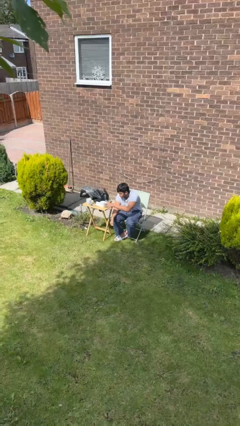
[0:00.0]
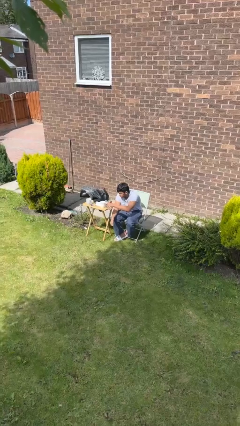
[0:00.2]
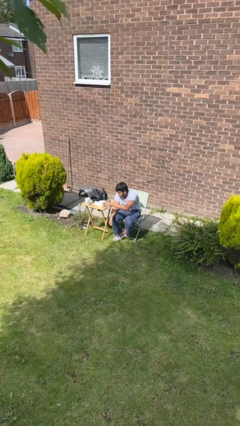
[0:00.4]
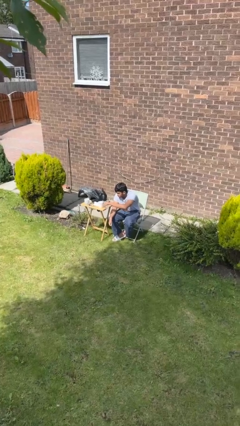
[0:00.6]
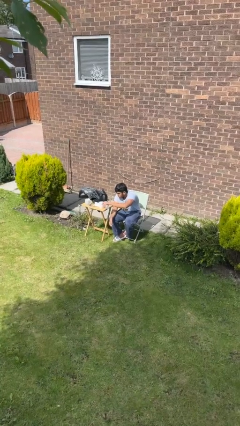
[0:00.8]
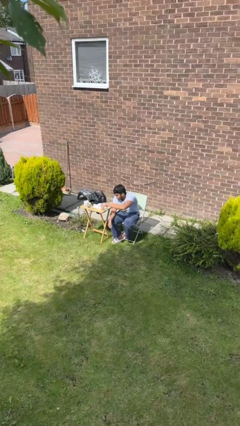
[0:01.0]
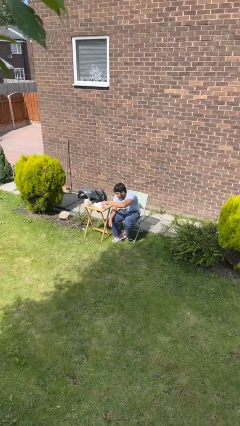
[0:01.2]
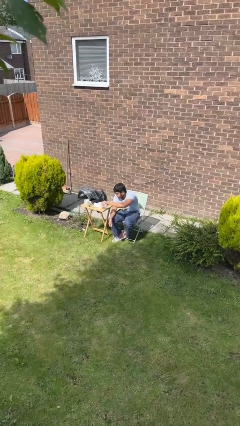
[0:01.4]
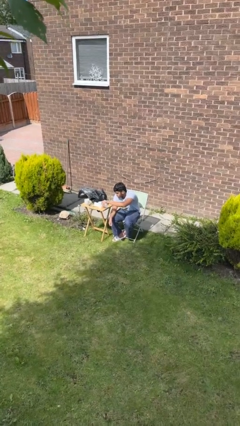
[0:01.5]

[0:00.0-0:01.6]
person pours liquid into cup

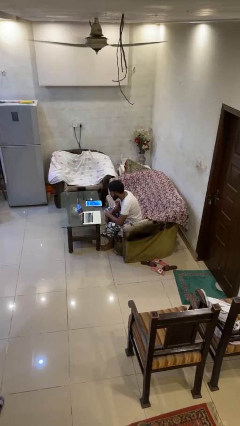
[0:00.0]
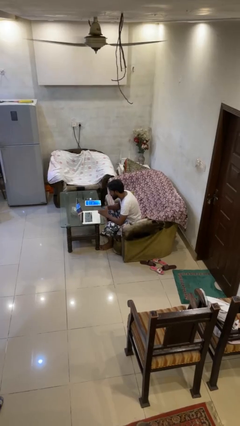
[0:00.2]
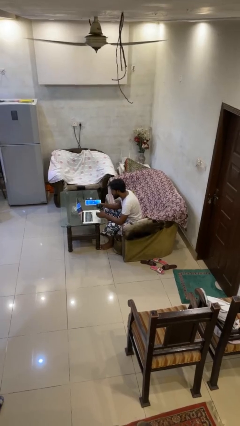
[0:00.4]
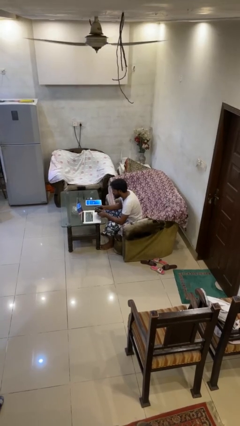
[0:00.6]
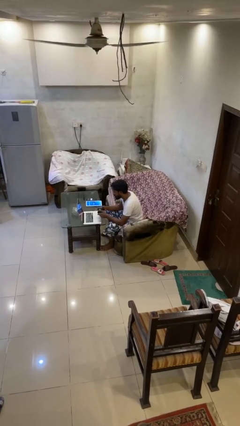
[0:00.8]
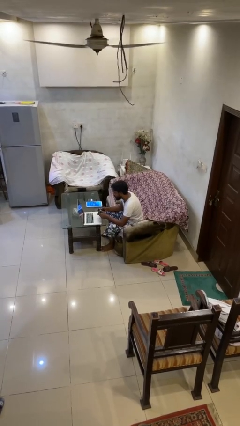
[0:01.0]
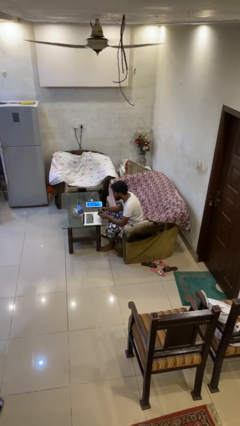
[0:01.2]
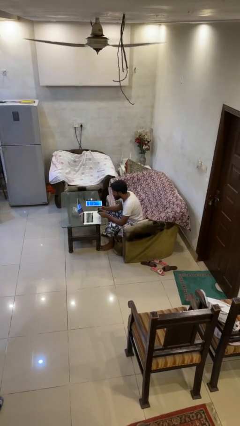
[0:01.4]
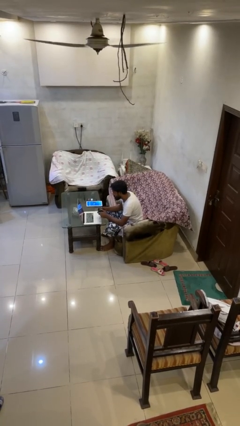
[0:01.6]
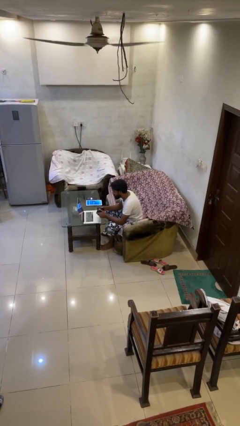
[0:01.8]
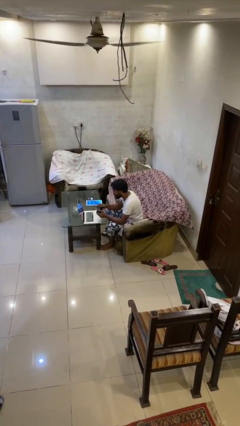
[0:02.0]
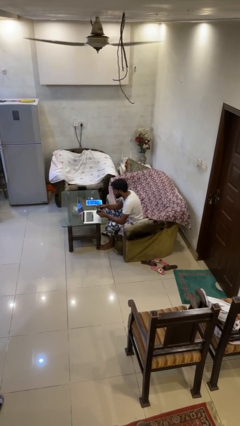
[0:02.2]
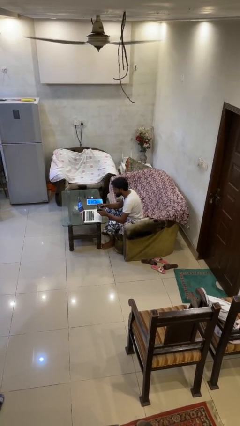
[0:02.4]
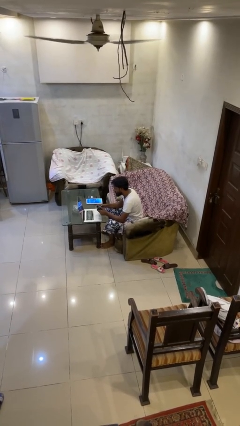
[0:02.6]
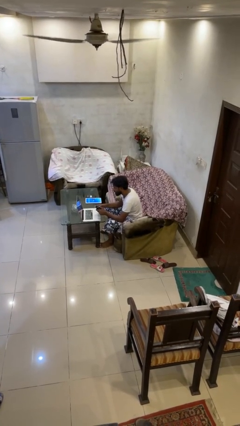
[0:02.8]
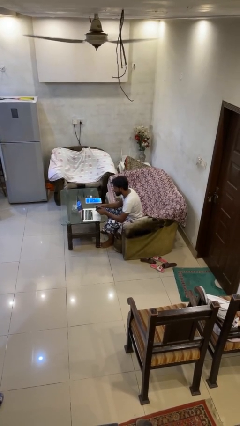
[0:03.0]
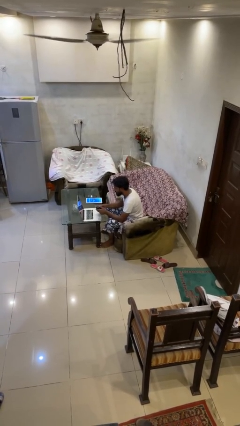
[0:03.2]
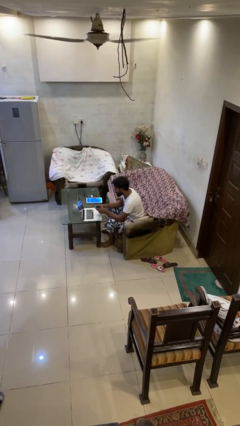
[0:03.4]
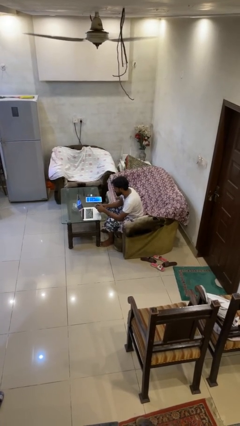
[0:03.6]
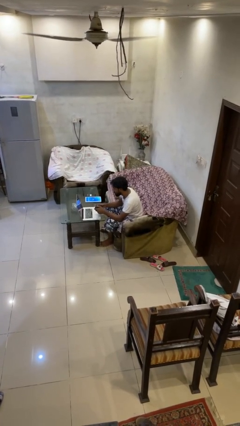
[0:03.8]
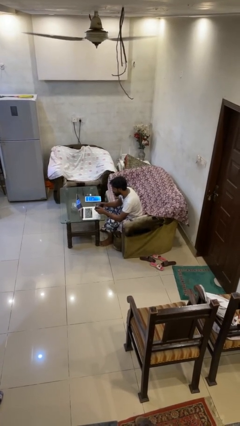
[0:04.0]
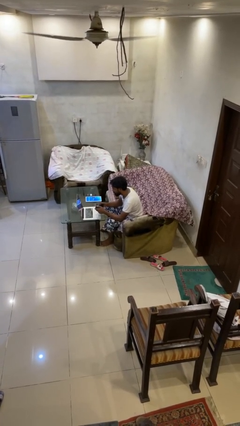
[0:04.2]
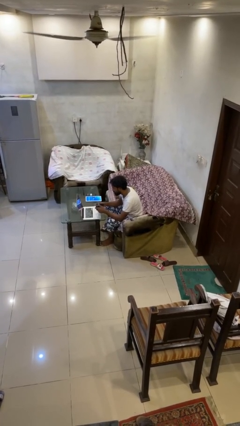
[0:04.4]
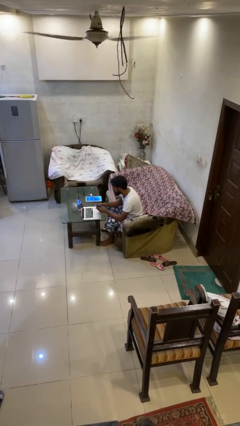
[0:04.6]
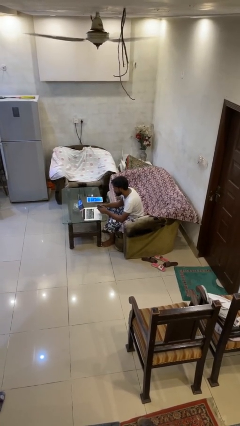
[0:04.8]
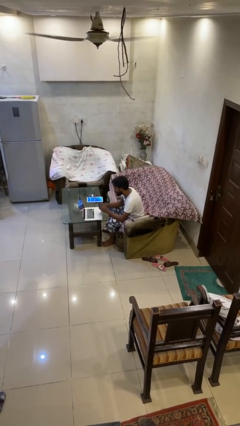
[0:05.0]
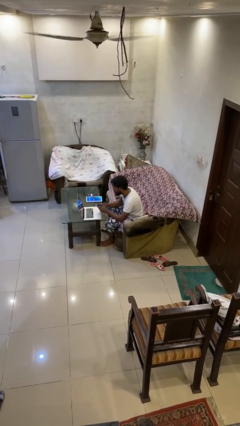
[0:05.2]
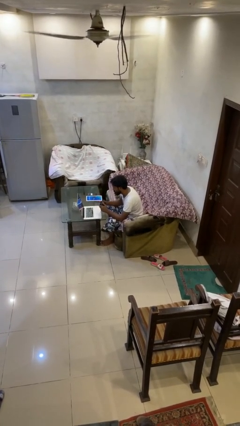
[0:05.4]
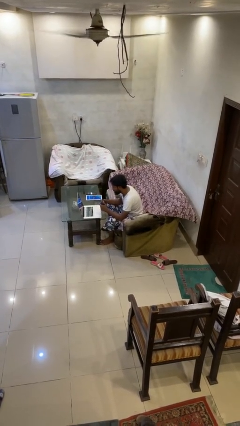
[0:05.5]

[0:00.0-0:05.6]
person interacts with handheld game

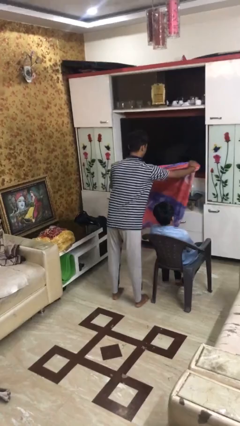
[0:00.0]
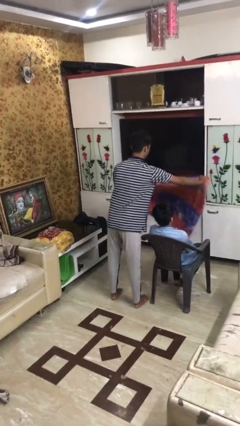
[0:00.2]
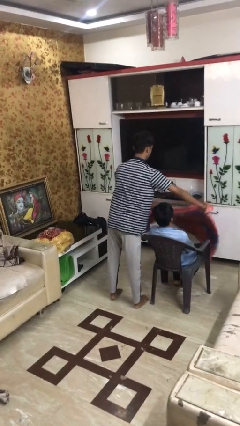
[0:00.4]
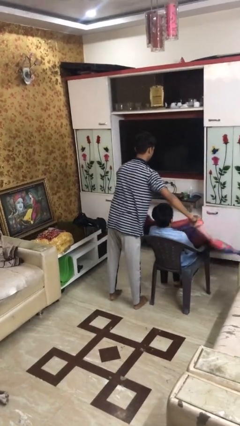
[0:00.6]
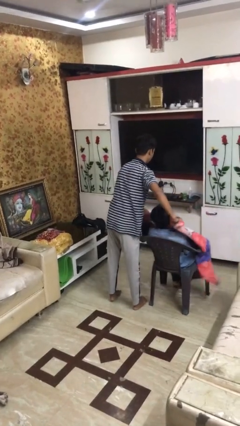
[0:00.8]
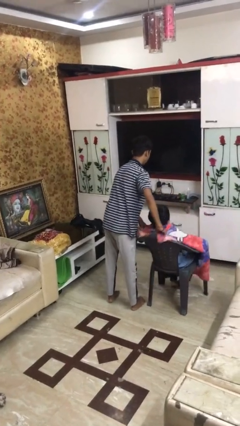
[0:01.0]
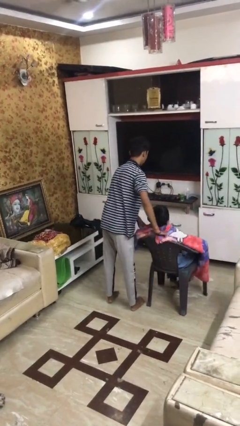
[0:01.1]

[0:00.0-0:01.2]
person covers friend with blanket

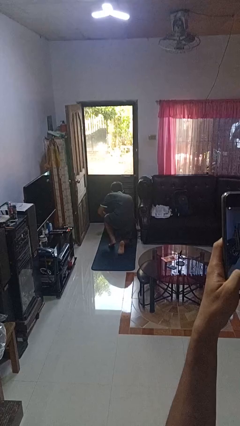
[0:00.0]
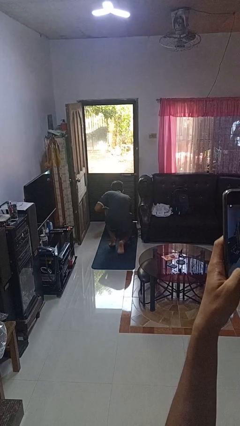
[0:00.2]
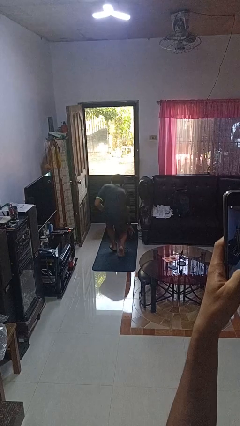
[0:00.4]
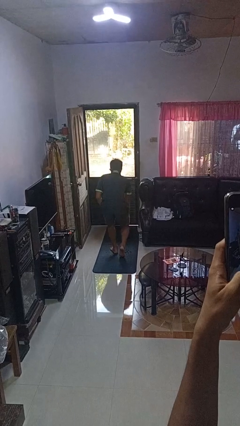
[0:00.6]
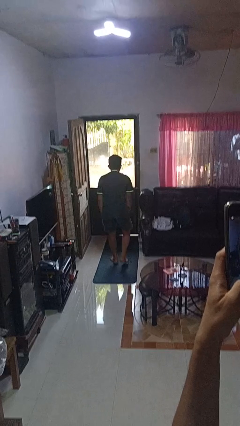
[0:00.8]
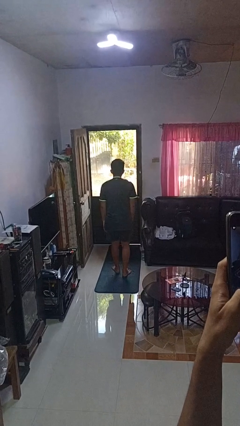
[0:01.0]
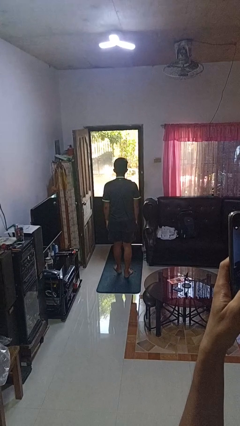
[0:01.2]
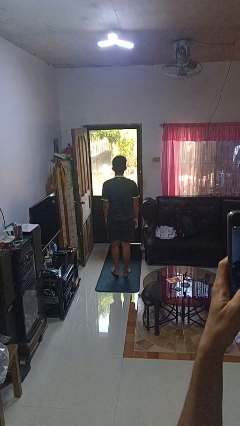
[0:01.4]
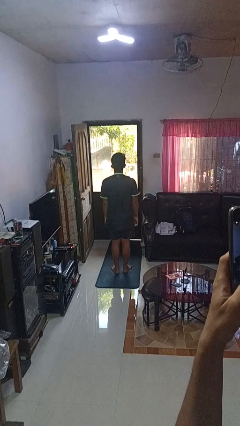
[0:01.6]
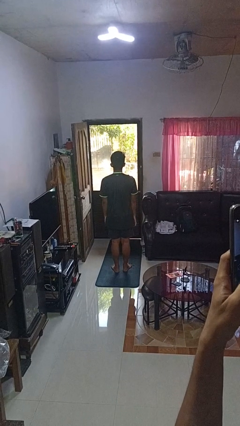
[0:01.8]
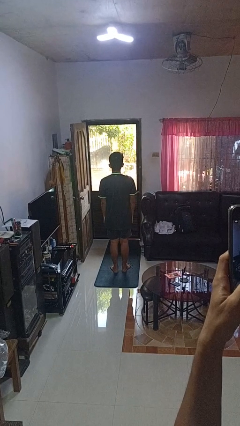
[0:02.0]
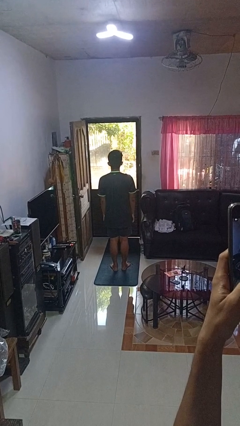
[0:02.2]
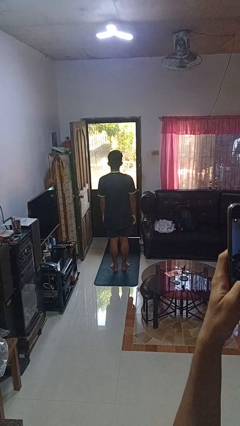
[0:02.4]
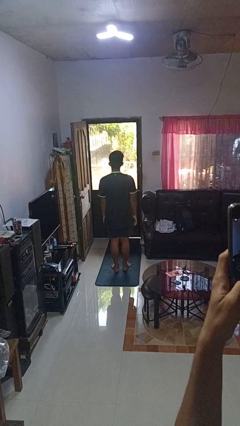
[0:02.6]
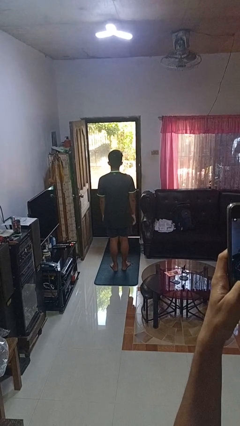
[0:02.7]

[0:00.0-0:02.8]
person stands up from floor

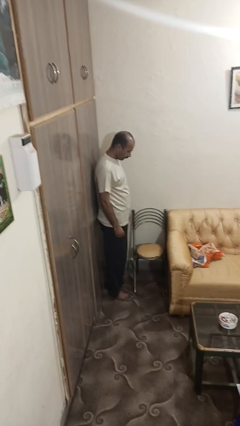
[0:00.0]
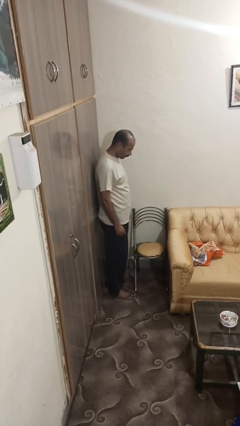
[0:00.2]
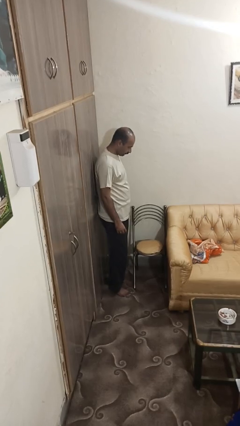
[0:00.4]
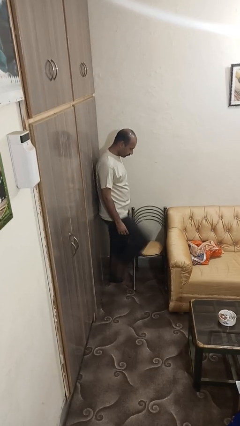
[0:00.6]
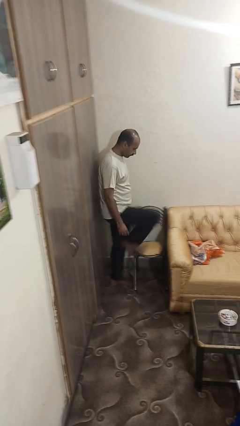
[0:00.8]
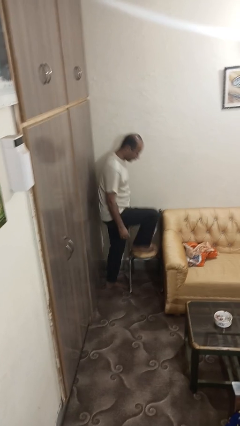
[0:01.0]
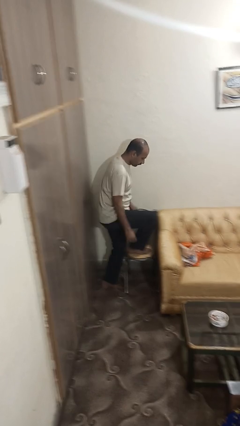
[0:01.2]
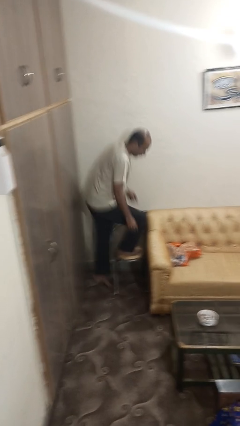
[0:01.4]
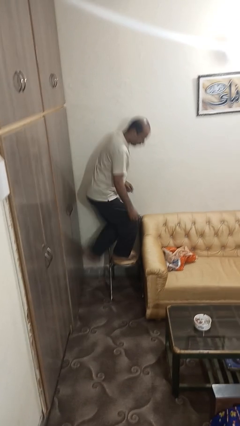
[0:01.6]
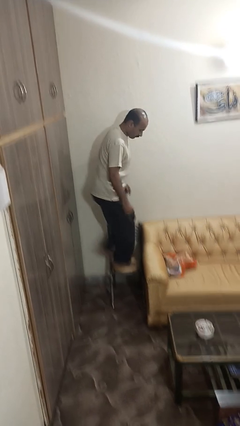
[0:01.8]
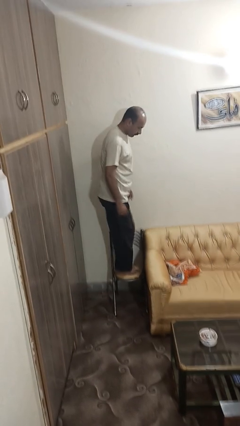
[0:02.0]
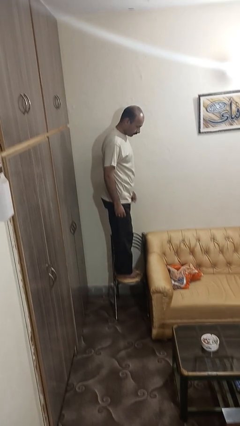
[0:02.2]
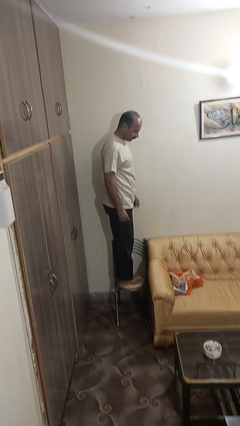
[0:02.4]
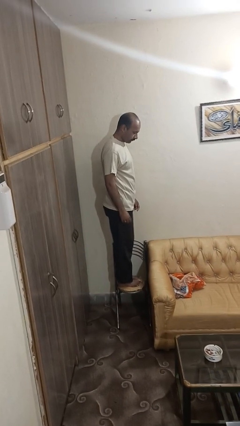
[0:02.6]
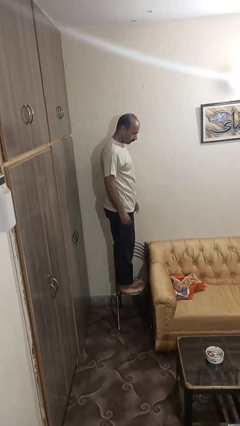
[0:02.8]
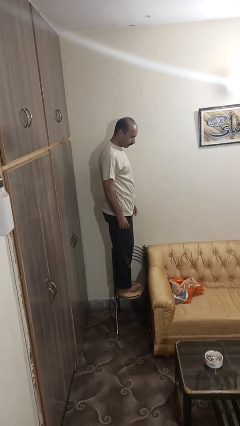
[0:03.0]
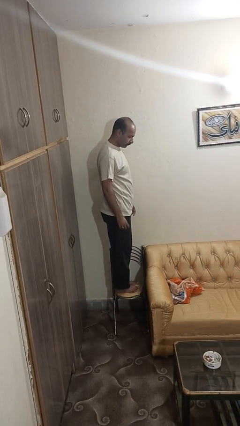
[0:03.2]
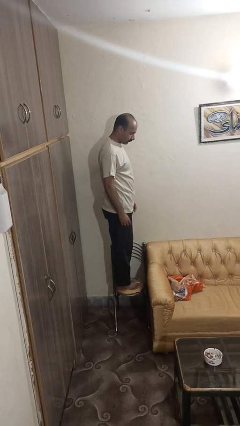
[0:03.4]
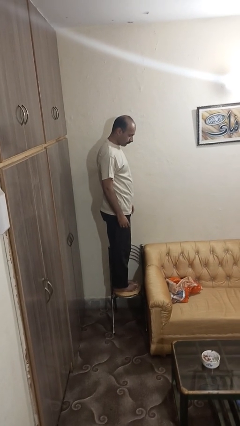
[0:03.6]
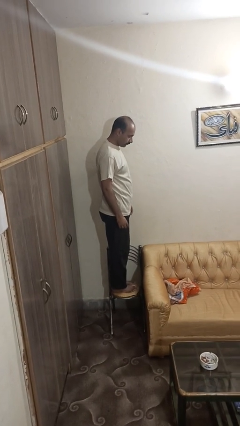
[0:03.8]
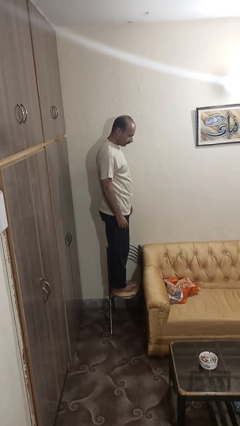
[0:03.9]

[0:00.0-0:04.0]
person climbs on chair

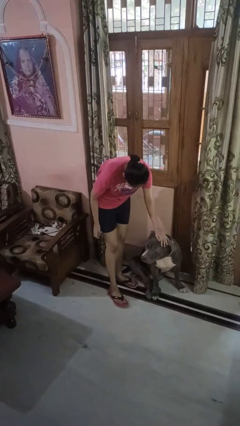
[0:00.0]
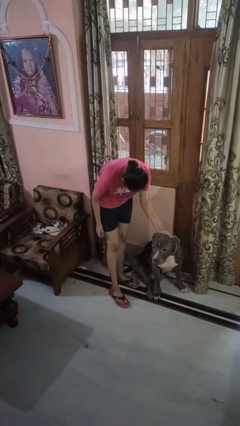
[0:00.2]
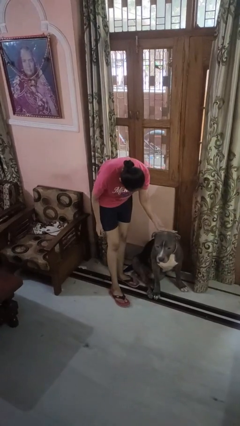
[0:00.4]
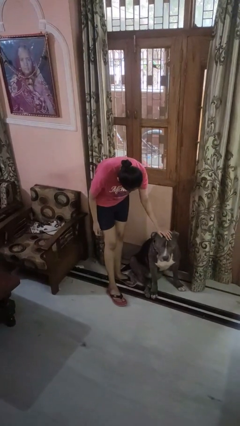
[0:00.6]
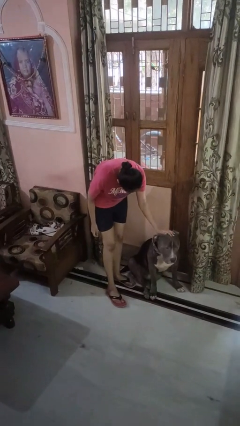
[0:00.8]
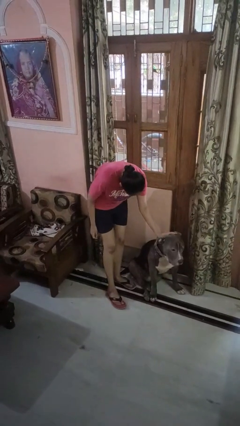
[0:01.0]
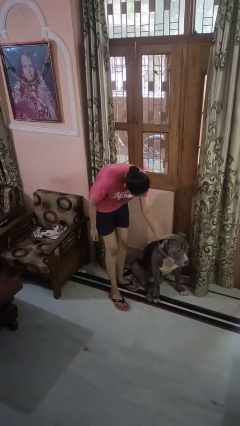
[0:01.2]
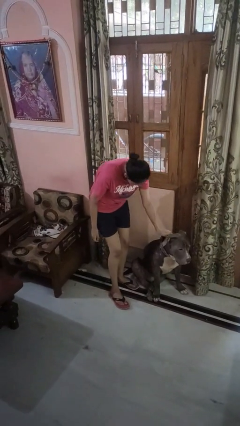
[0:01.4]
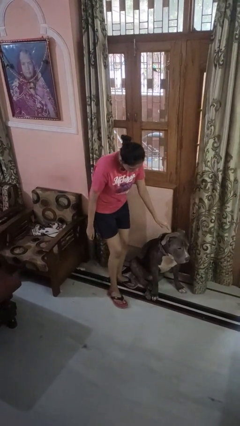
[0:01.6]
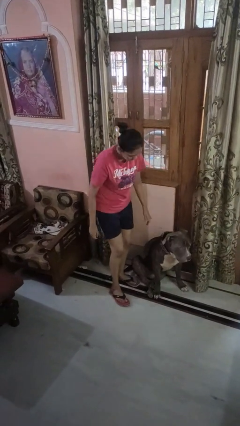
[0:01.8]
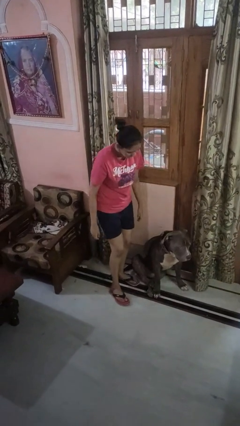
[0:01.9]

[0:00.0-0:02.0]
person pets dog
